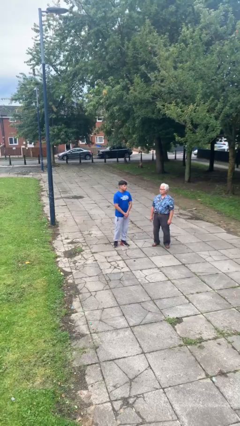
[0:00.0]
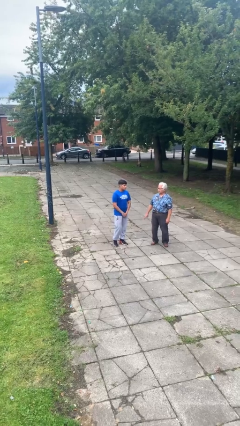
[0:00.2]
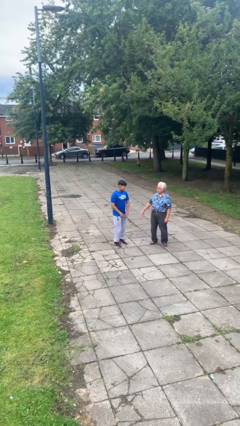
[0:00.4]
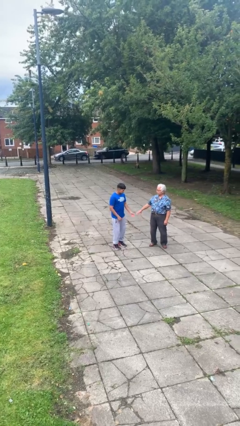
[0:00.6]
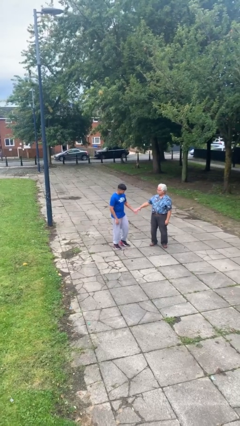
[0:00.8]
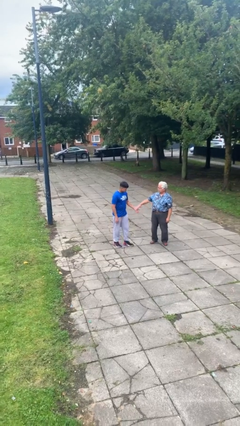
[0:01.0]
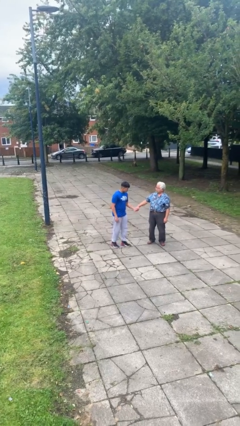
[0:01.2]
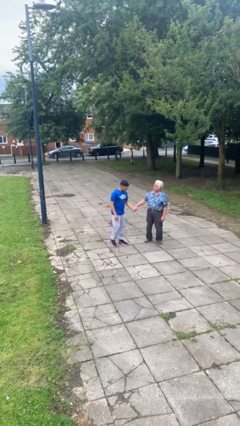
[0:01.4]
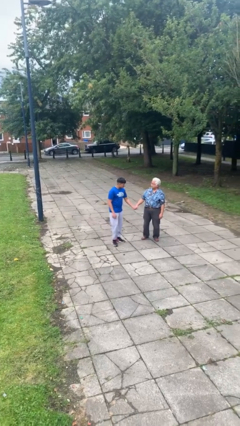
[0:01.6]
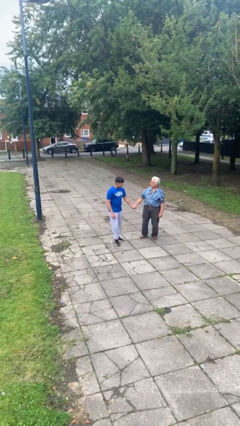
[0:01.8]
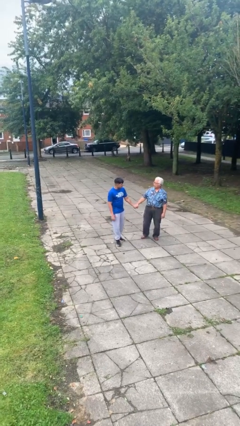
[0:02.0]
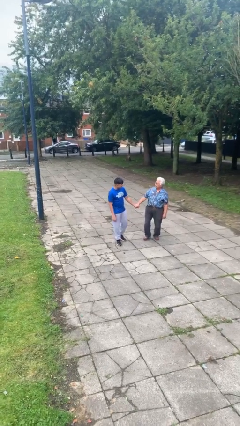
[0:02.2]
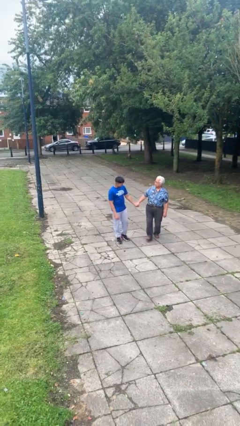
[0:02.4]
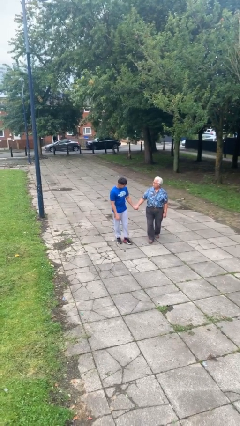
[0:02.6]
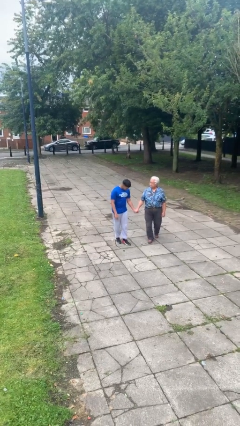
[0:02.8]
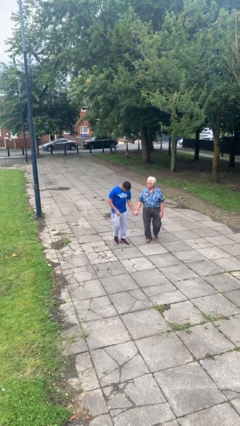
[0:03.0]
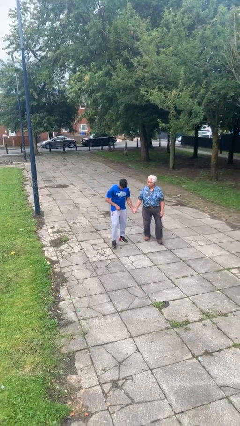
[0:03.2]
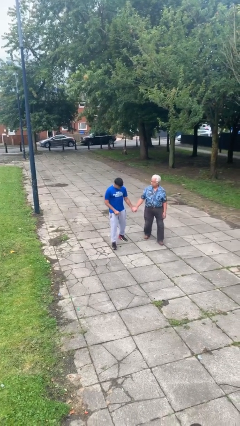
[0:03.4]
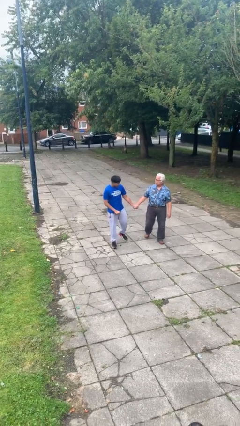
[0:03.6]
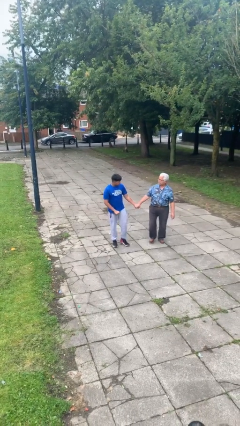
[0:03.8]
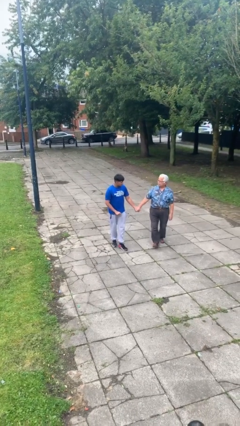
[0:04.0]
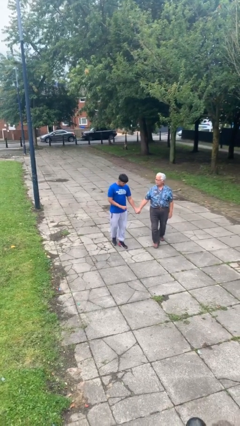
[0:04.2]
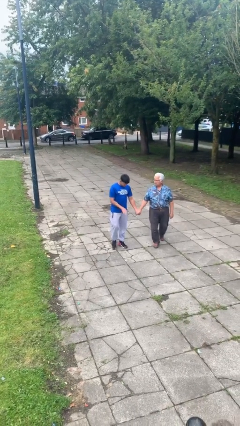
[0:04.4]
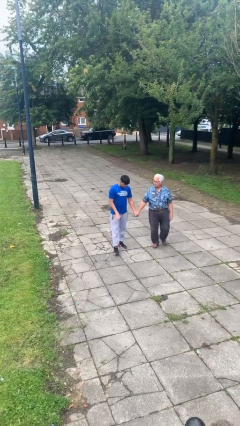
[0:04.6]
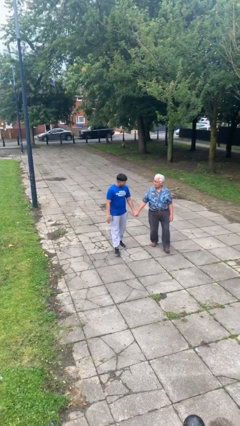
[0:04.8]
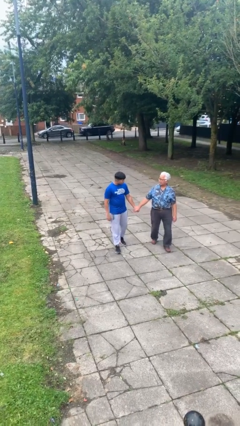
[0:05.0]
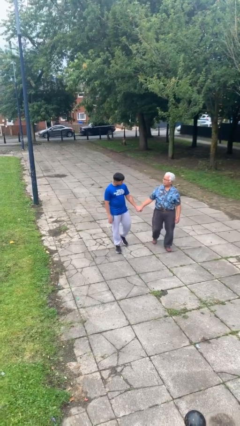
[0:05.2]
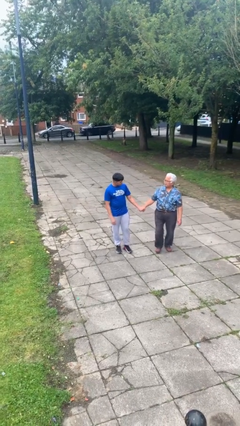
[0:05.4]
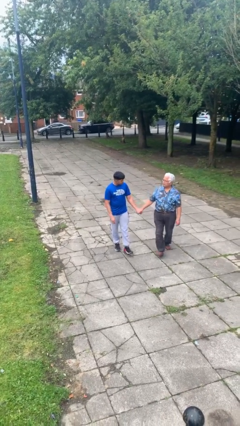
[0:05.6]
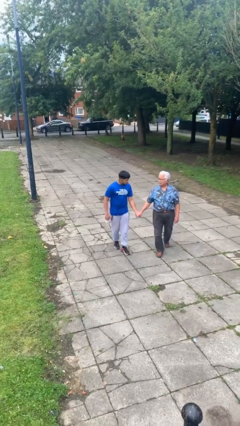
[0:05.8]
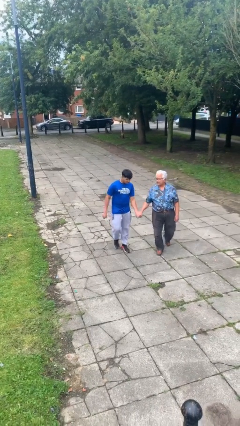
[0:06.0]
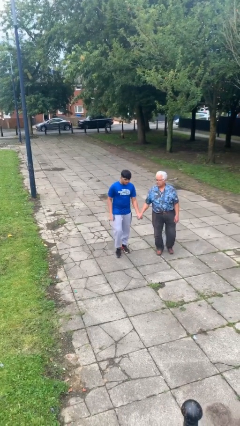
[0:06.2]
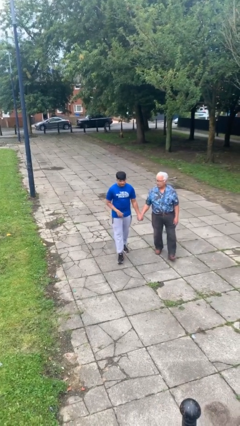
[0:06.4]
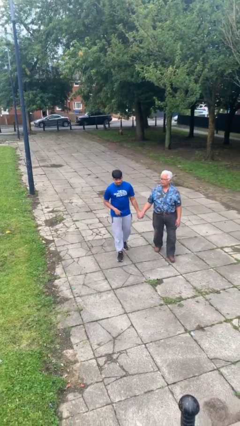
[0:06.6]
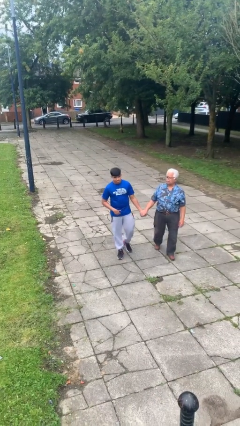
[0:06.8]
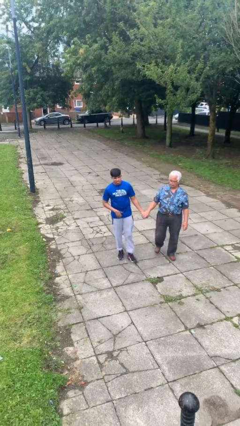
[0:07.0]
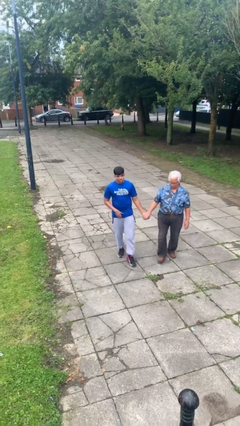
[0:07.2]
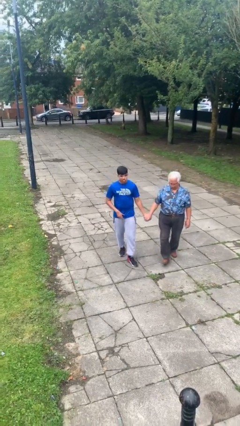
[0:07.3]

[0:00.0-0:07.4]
person holds hand

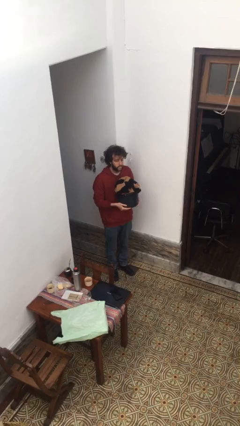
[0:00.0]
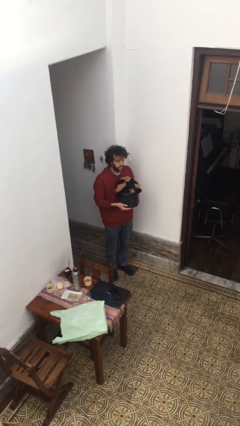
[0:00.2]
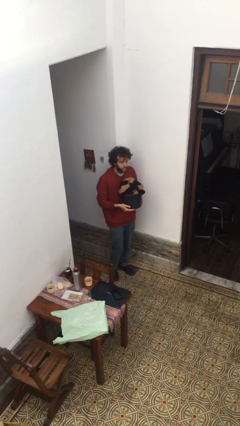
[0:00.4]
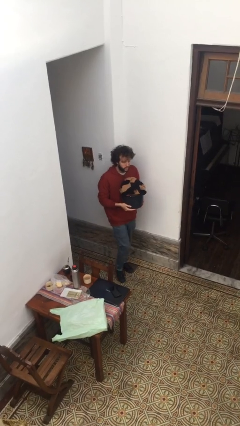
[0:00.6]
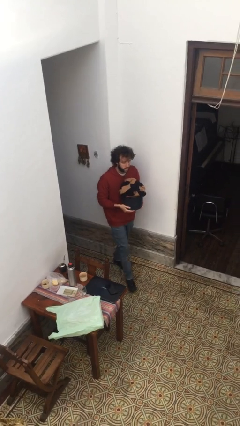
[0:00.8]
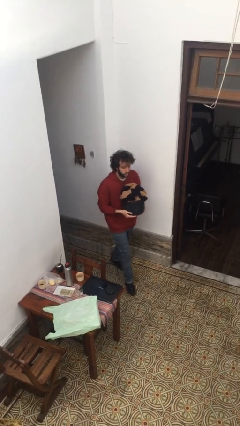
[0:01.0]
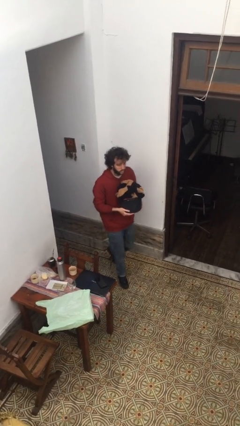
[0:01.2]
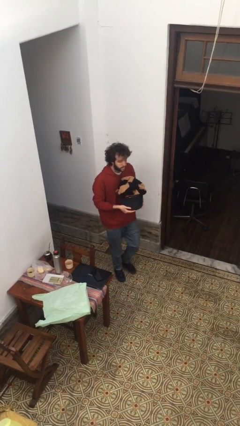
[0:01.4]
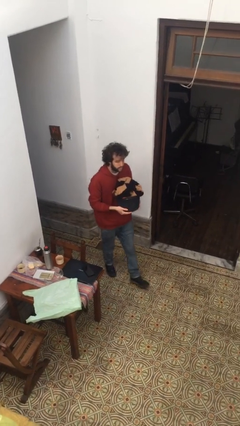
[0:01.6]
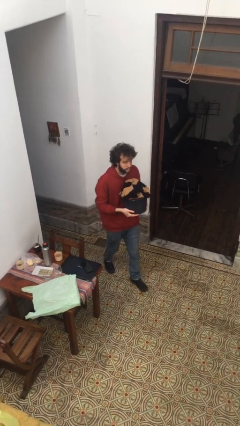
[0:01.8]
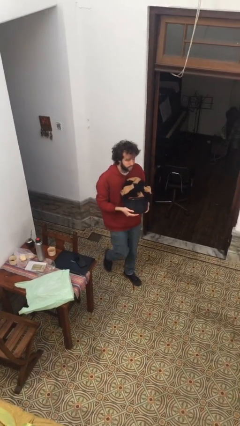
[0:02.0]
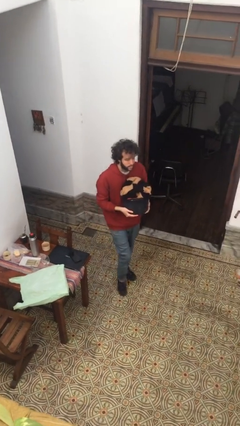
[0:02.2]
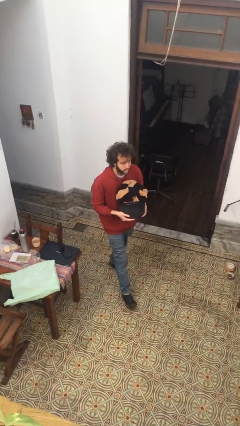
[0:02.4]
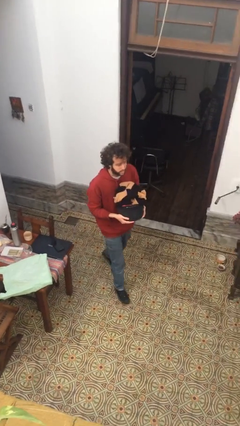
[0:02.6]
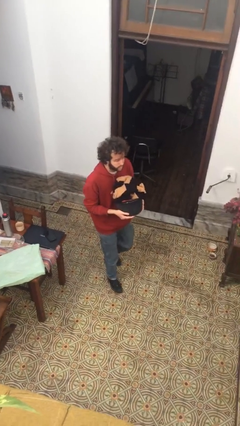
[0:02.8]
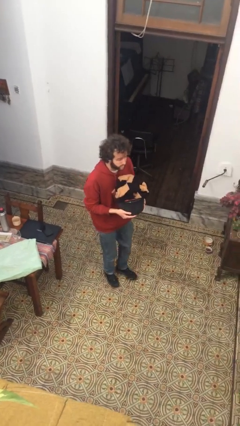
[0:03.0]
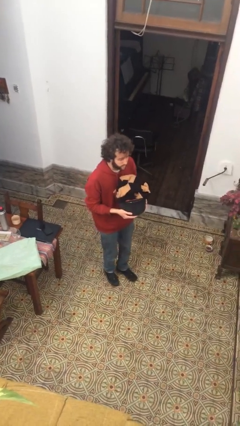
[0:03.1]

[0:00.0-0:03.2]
person carries laundry basket

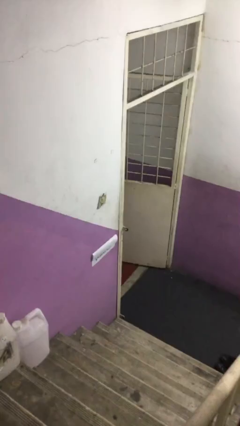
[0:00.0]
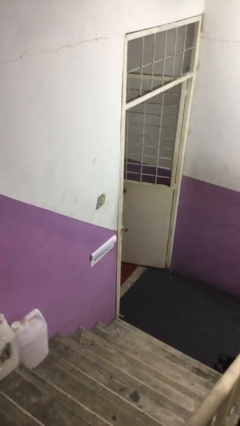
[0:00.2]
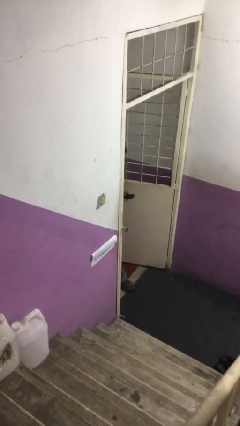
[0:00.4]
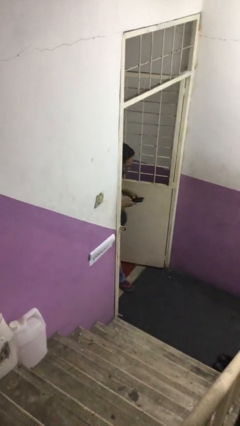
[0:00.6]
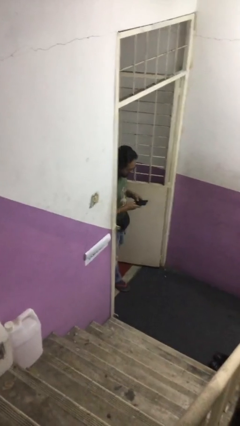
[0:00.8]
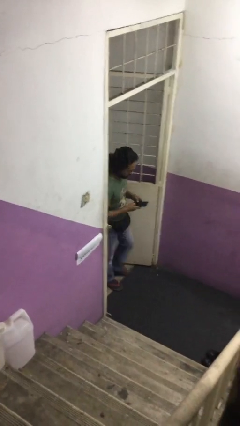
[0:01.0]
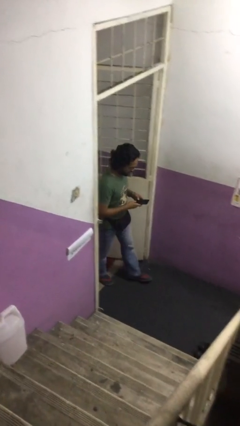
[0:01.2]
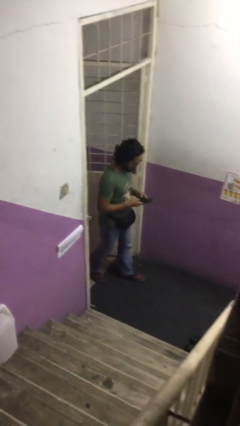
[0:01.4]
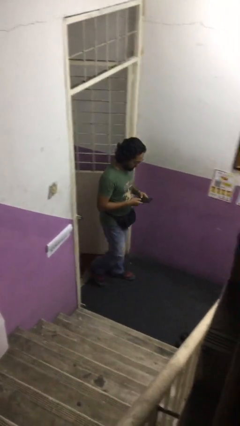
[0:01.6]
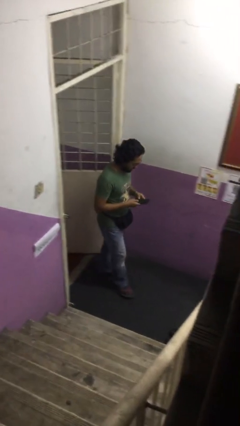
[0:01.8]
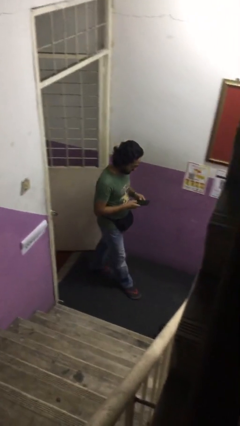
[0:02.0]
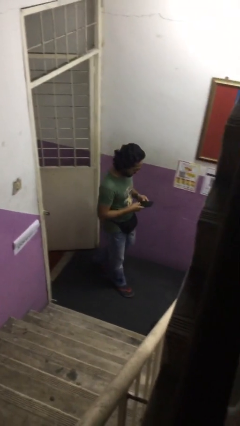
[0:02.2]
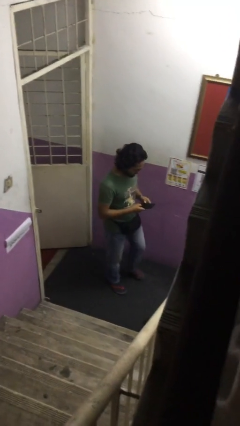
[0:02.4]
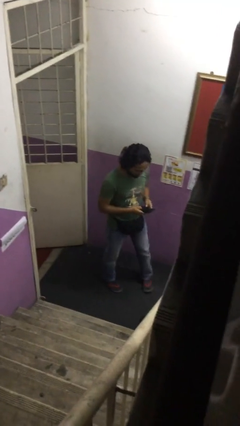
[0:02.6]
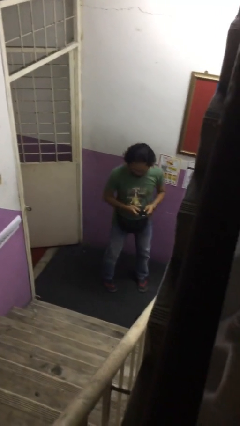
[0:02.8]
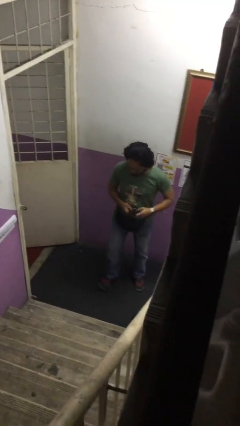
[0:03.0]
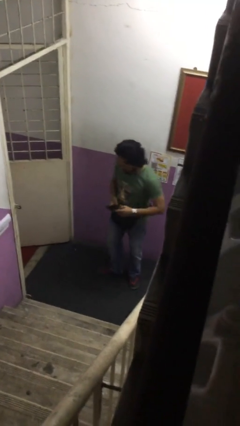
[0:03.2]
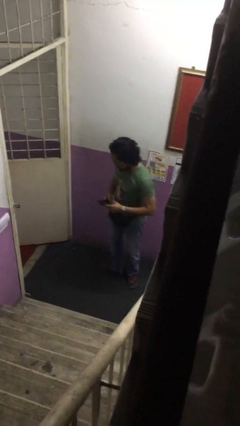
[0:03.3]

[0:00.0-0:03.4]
person enters scene through structure

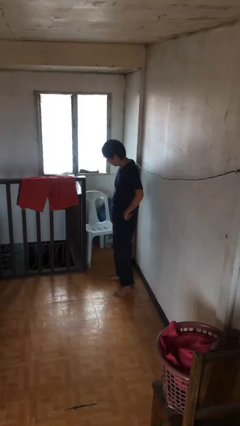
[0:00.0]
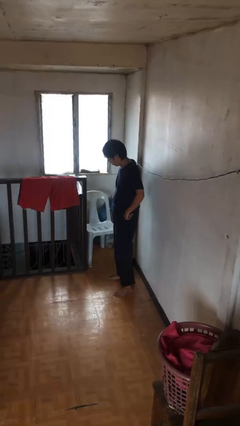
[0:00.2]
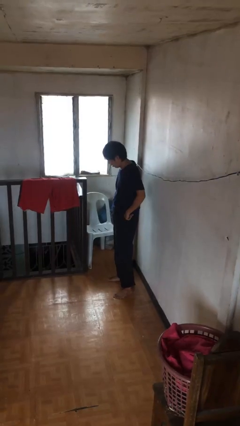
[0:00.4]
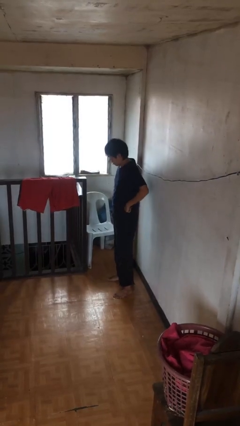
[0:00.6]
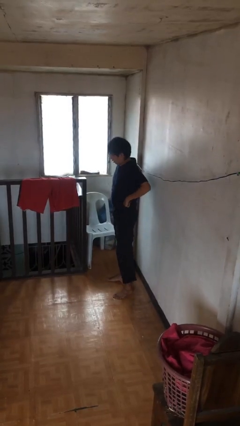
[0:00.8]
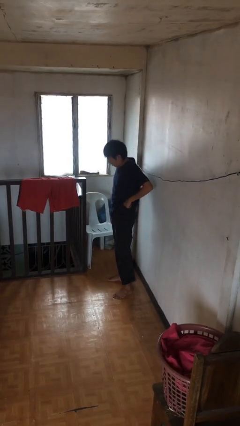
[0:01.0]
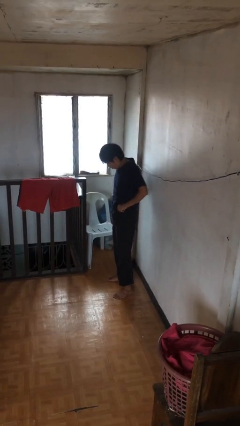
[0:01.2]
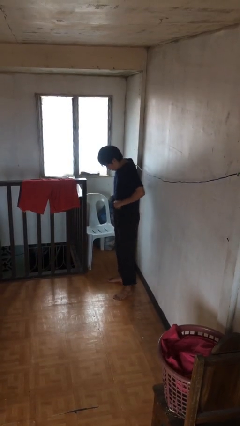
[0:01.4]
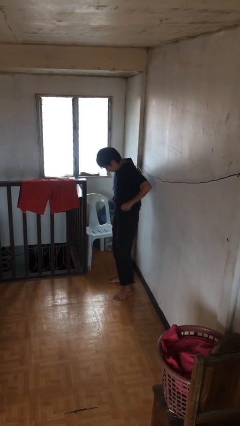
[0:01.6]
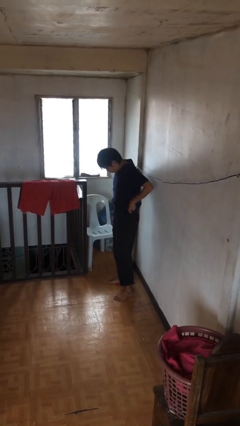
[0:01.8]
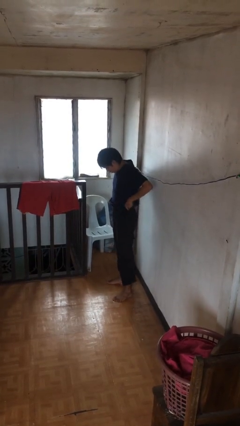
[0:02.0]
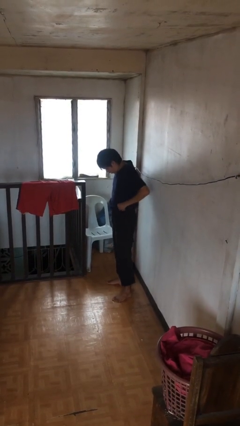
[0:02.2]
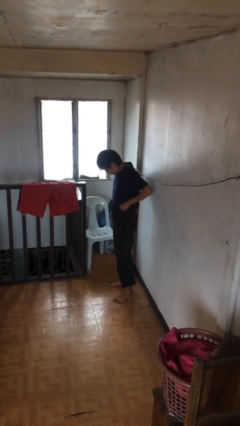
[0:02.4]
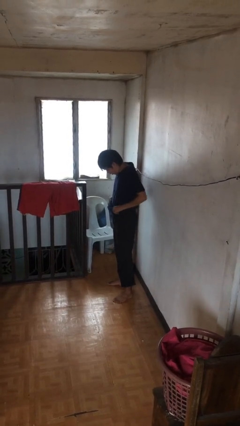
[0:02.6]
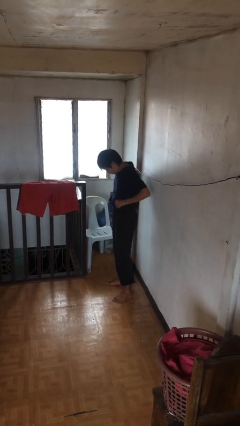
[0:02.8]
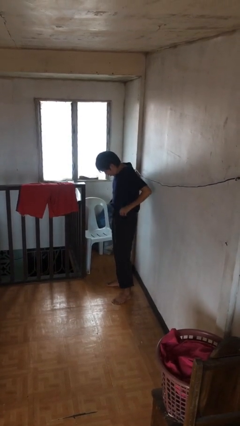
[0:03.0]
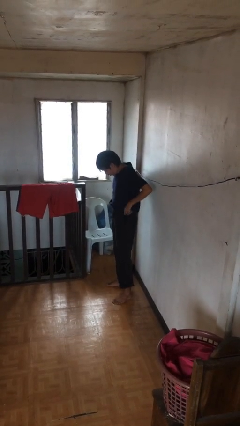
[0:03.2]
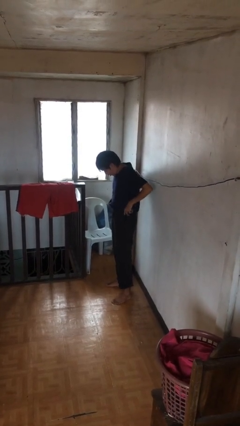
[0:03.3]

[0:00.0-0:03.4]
person hikes up pants

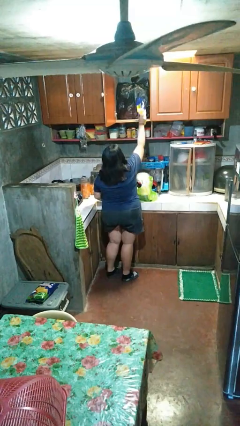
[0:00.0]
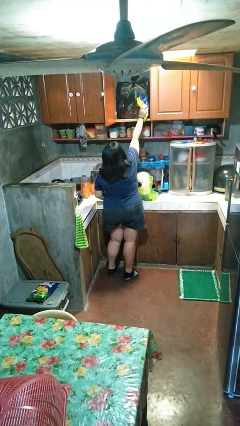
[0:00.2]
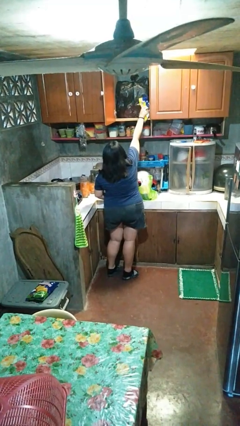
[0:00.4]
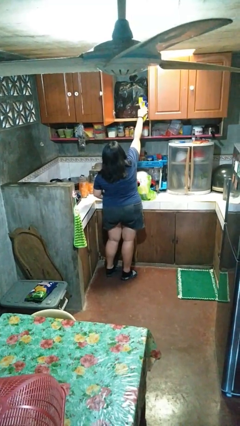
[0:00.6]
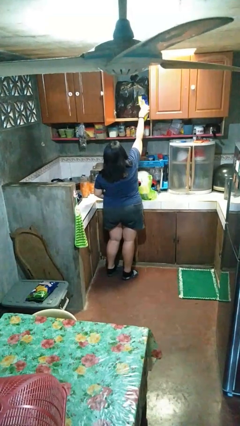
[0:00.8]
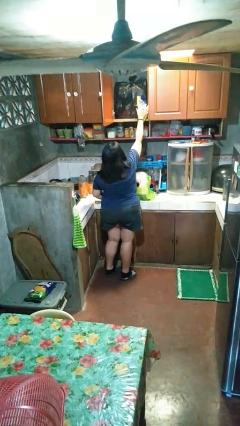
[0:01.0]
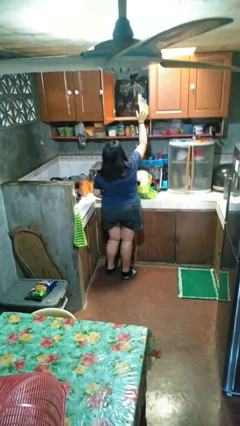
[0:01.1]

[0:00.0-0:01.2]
person loads groceries into cabinet
